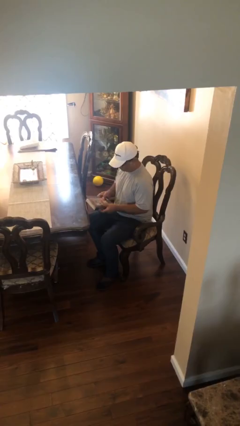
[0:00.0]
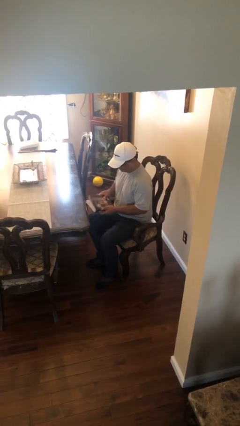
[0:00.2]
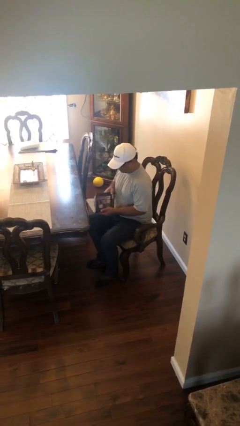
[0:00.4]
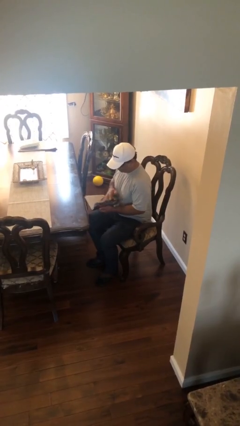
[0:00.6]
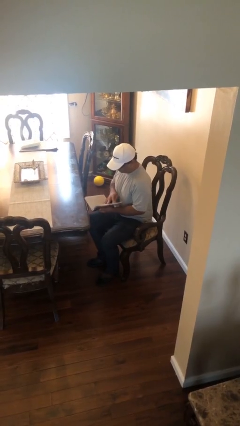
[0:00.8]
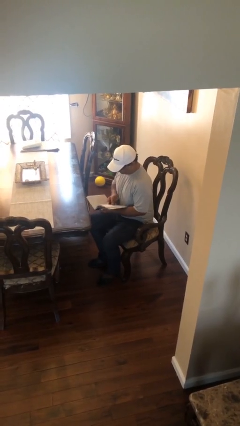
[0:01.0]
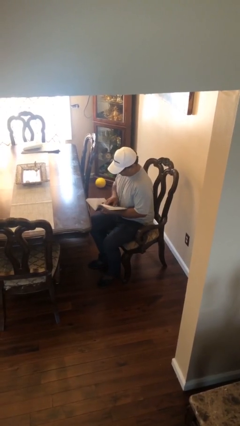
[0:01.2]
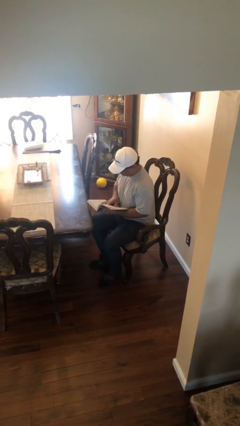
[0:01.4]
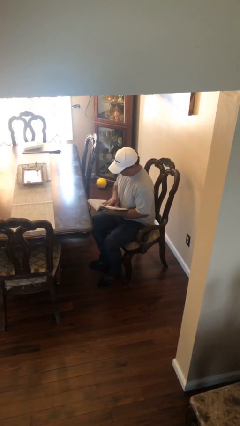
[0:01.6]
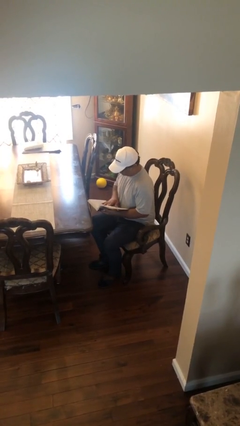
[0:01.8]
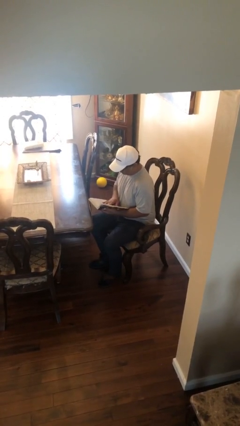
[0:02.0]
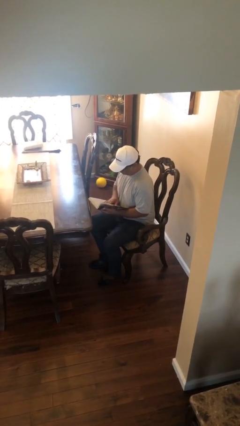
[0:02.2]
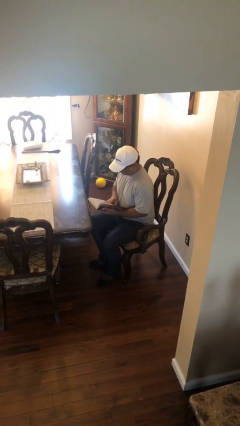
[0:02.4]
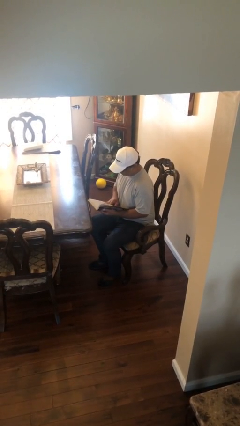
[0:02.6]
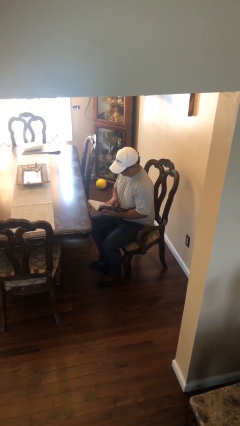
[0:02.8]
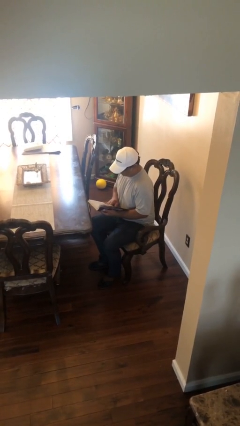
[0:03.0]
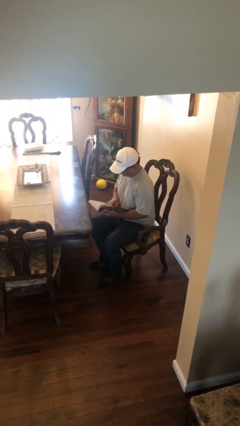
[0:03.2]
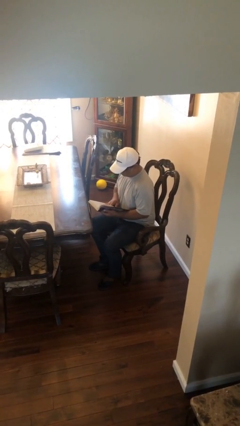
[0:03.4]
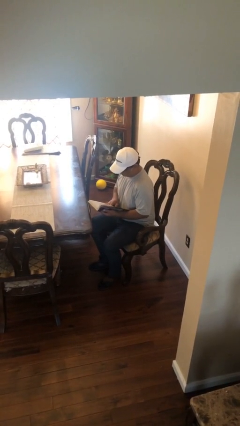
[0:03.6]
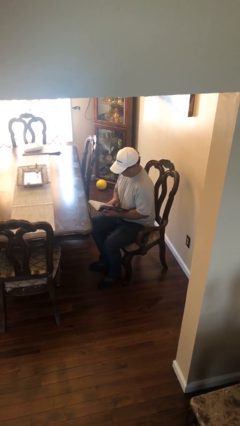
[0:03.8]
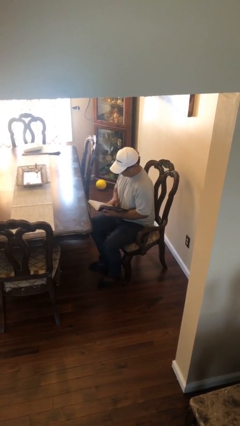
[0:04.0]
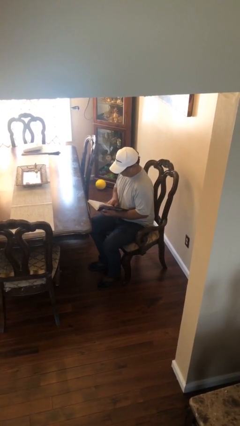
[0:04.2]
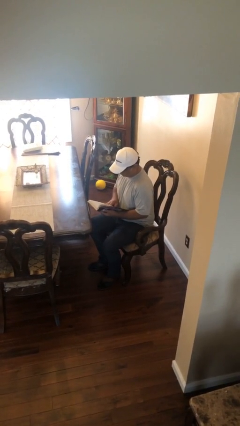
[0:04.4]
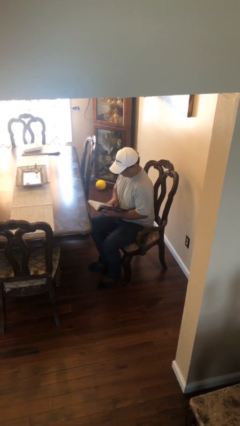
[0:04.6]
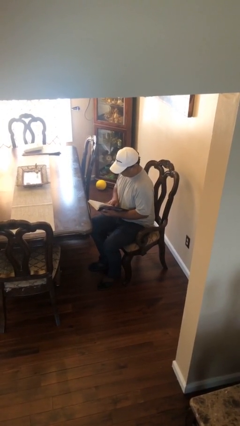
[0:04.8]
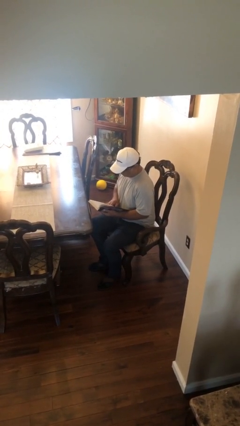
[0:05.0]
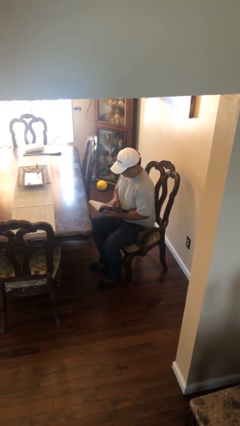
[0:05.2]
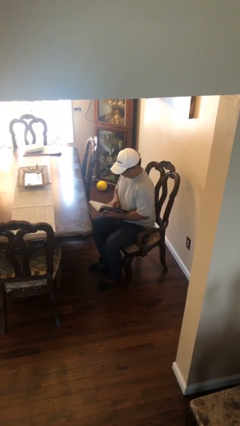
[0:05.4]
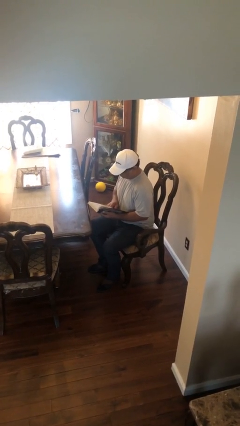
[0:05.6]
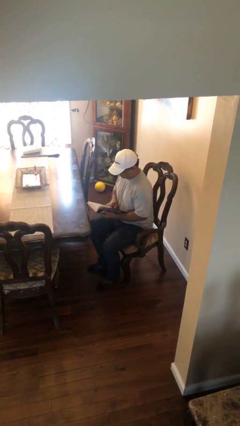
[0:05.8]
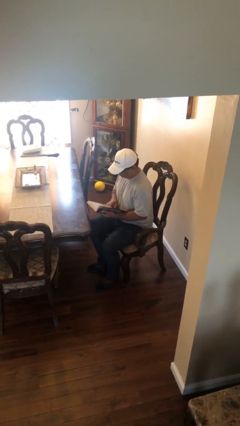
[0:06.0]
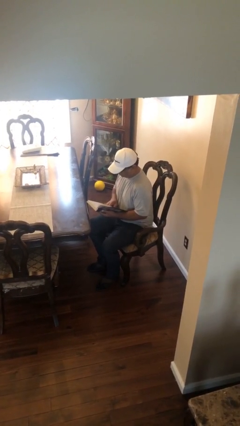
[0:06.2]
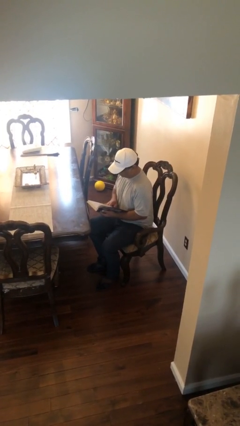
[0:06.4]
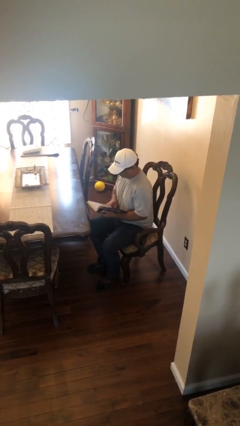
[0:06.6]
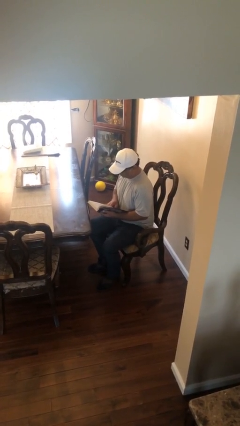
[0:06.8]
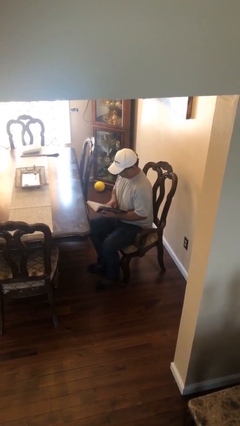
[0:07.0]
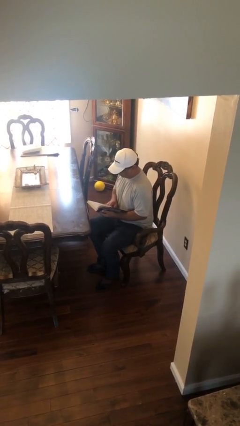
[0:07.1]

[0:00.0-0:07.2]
person reads document

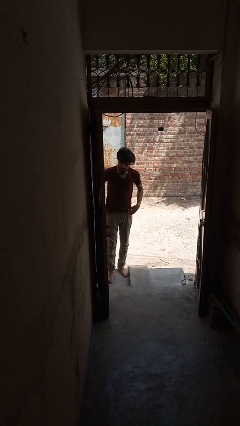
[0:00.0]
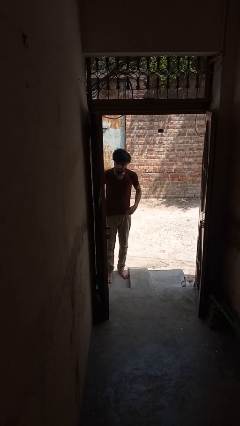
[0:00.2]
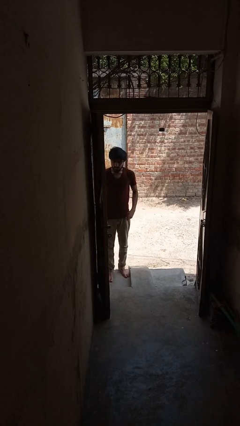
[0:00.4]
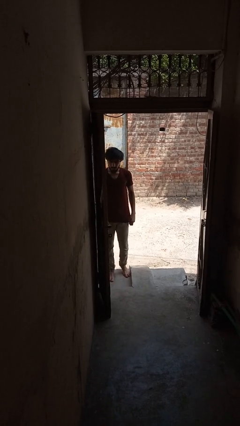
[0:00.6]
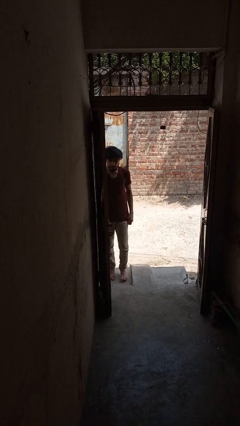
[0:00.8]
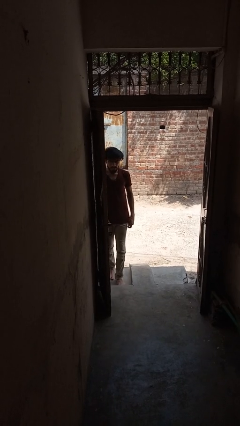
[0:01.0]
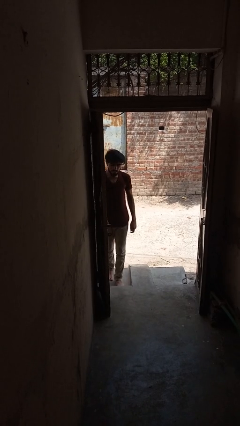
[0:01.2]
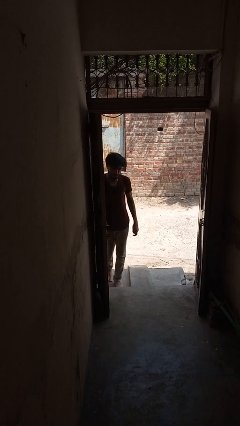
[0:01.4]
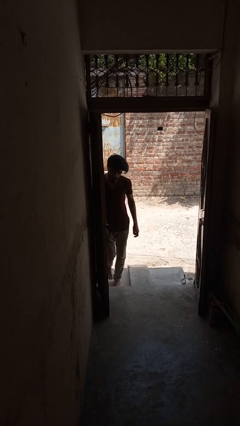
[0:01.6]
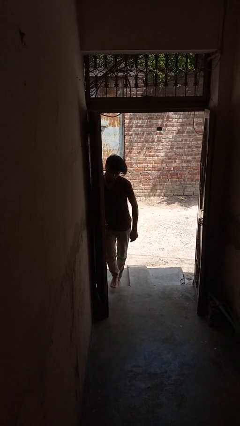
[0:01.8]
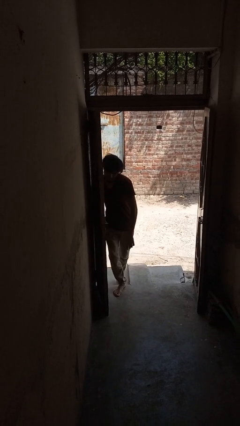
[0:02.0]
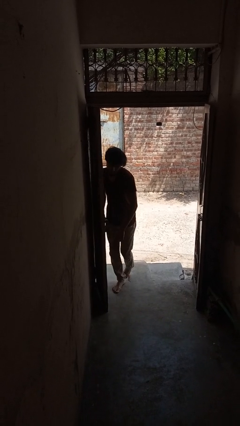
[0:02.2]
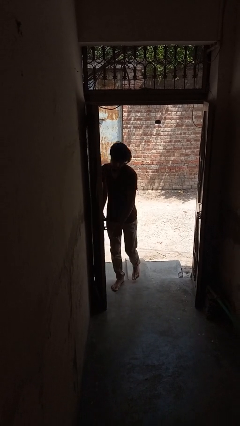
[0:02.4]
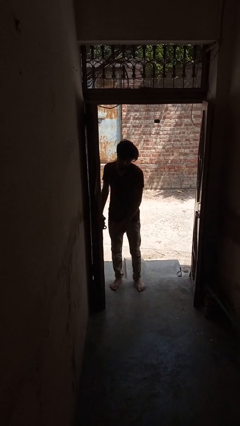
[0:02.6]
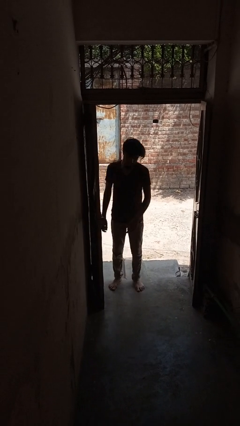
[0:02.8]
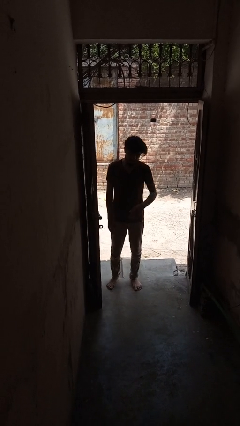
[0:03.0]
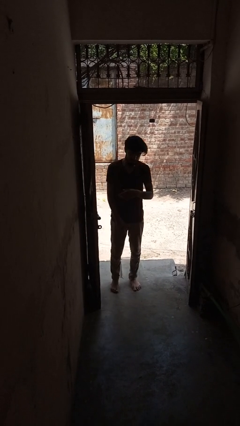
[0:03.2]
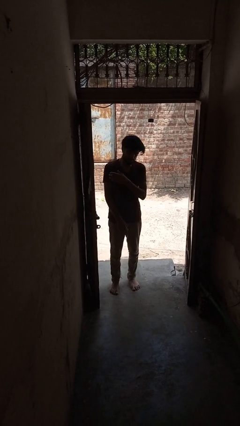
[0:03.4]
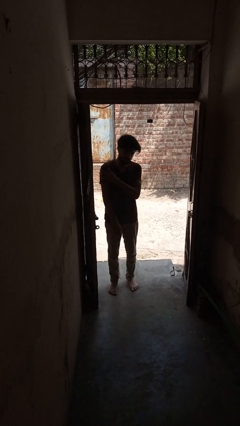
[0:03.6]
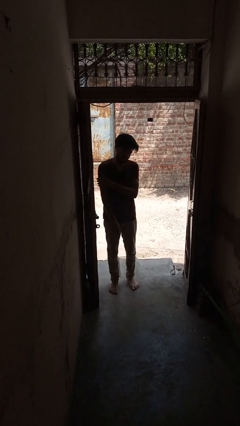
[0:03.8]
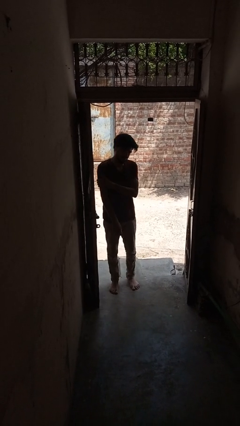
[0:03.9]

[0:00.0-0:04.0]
person bumps into wall

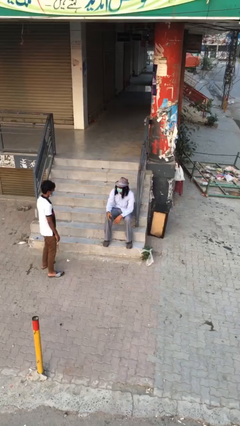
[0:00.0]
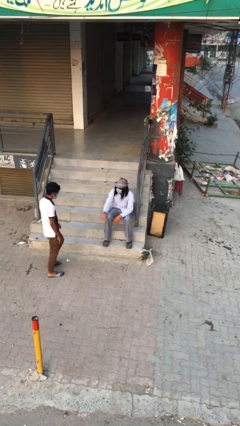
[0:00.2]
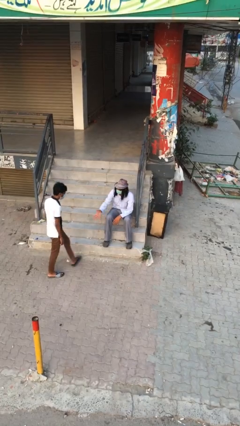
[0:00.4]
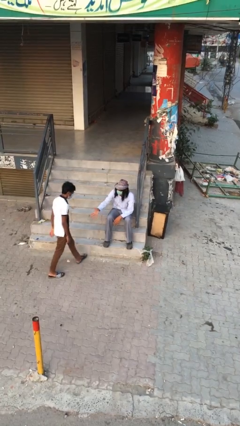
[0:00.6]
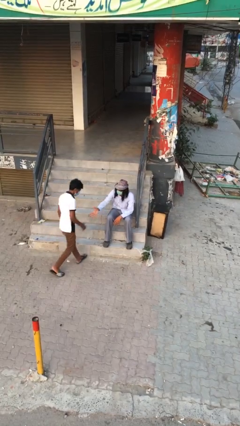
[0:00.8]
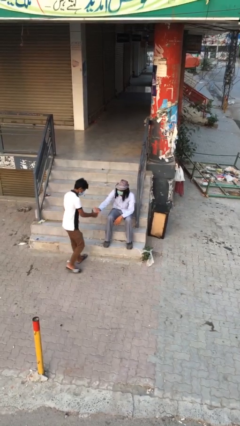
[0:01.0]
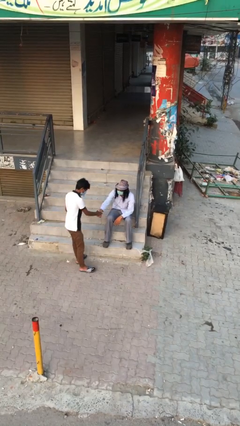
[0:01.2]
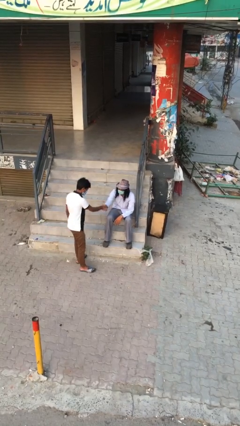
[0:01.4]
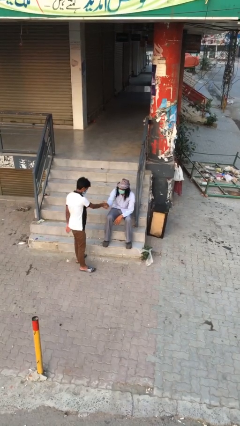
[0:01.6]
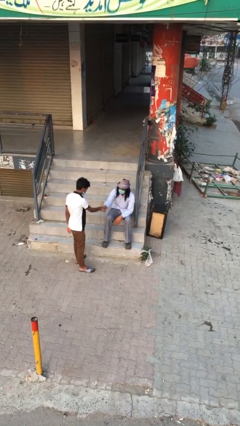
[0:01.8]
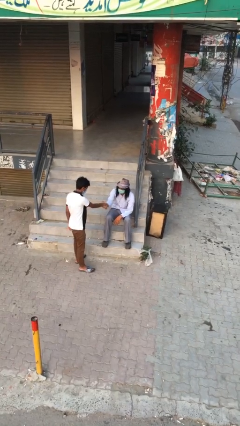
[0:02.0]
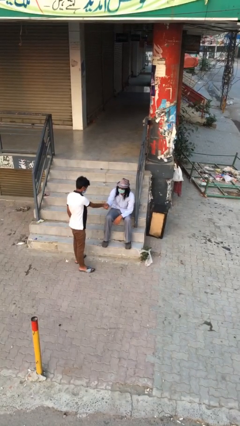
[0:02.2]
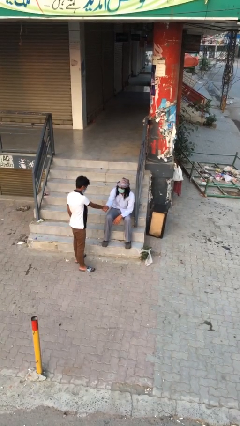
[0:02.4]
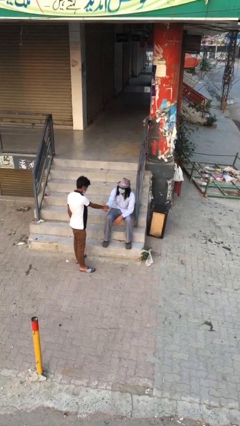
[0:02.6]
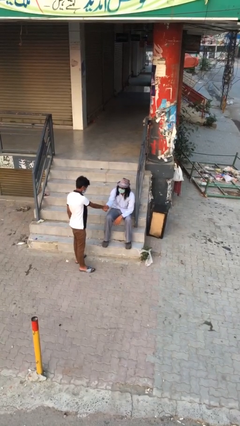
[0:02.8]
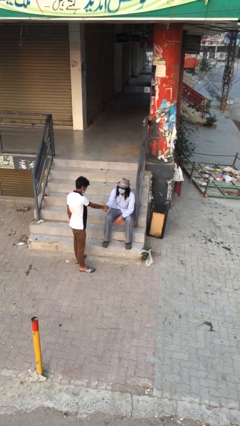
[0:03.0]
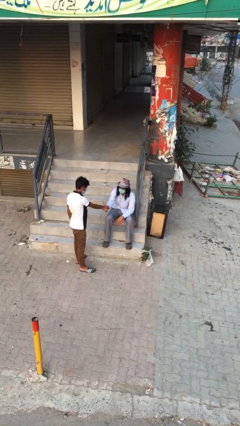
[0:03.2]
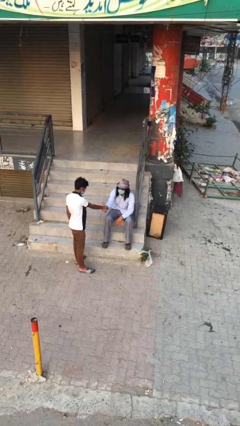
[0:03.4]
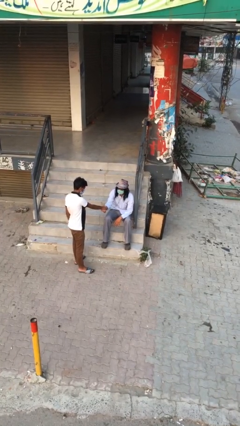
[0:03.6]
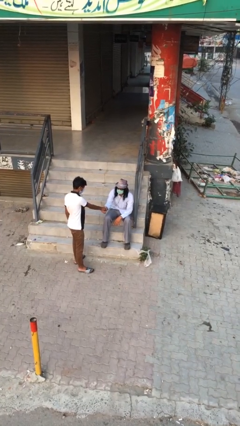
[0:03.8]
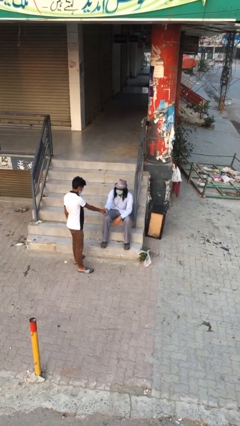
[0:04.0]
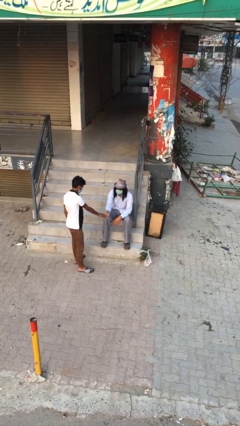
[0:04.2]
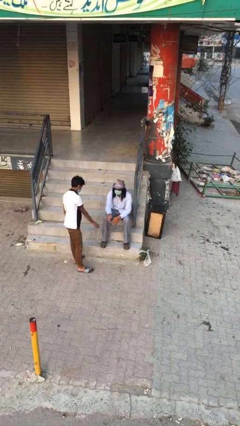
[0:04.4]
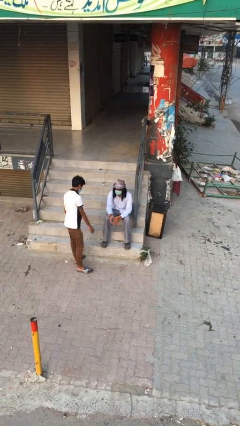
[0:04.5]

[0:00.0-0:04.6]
person shakes hand

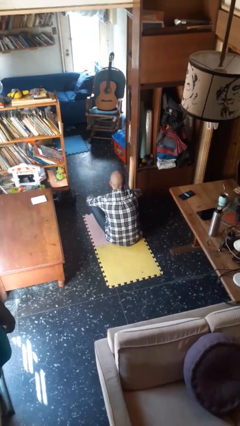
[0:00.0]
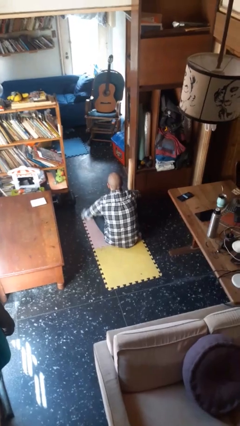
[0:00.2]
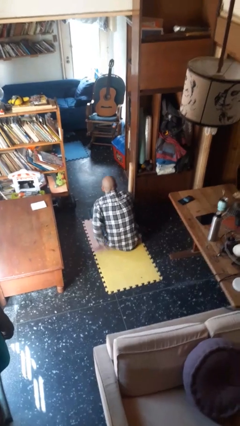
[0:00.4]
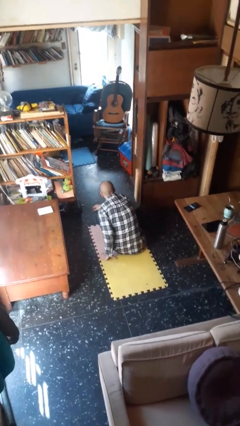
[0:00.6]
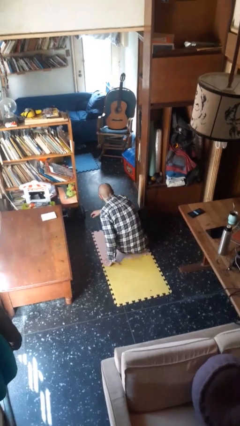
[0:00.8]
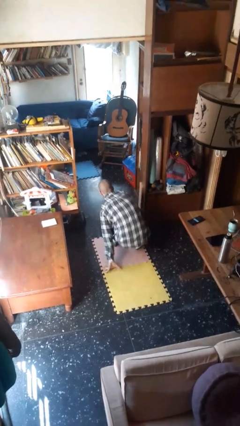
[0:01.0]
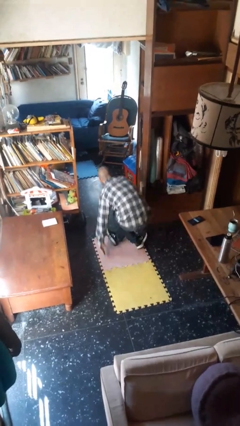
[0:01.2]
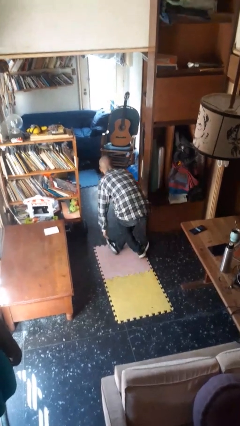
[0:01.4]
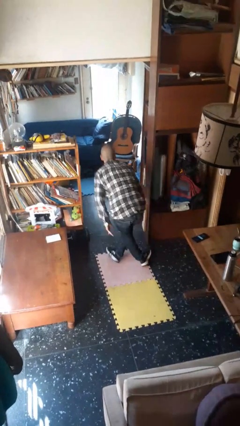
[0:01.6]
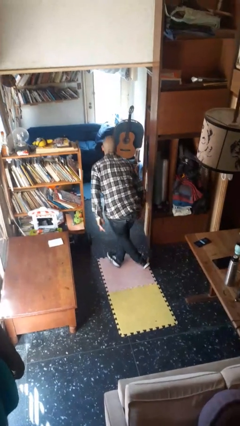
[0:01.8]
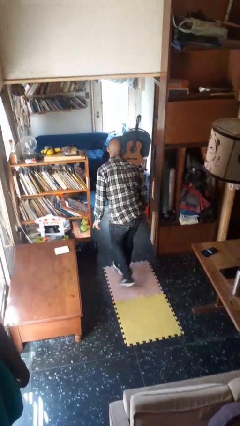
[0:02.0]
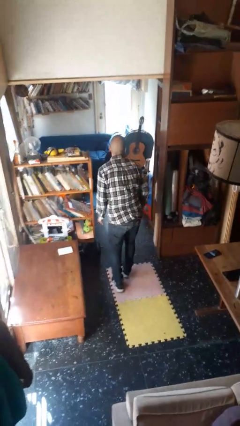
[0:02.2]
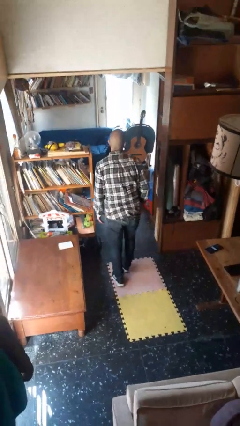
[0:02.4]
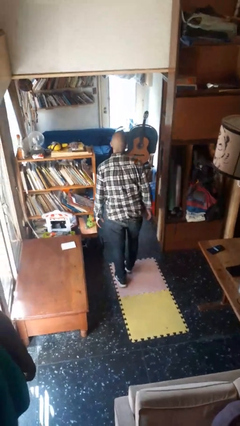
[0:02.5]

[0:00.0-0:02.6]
person stands up from floor
